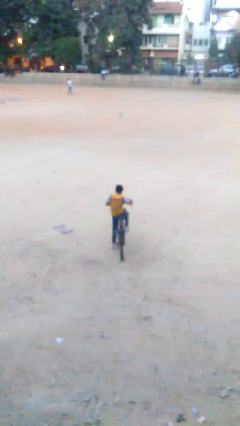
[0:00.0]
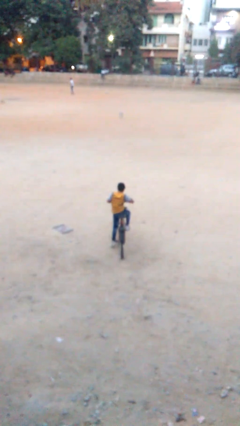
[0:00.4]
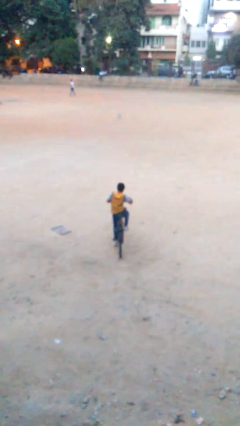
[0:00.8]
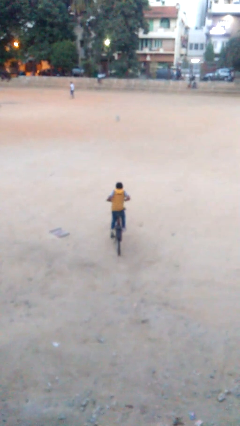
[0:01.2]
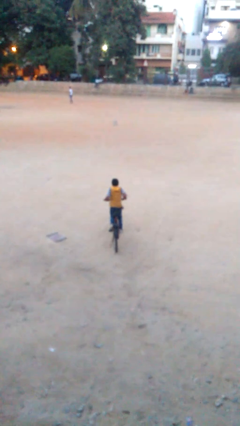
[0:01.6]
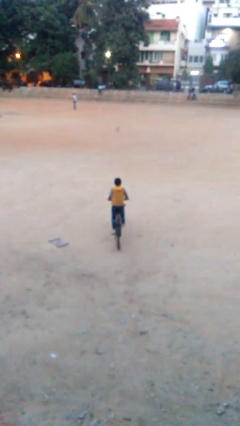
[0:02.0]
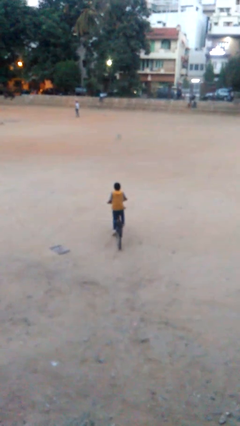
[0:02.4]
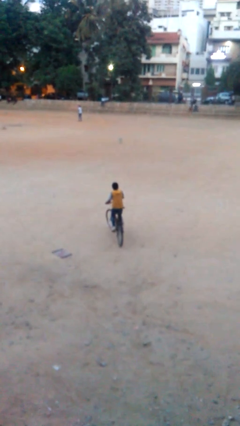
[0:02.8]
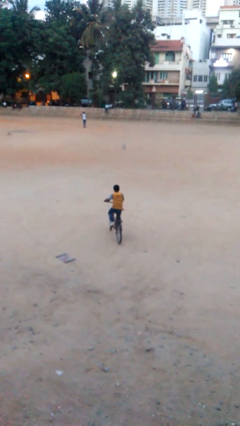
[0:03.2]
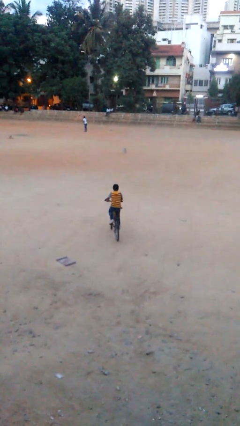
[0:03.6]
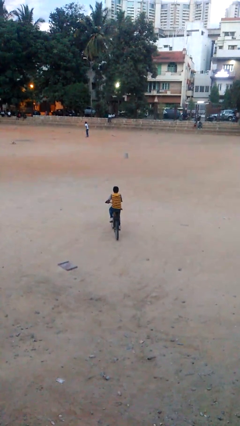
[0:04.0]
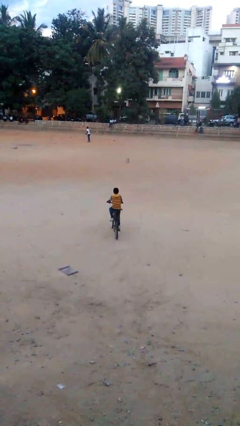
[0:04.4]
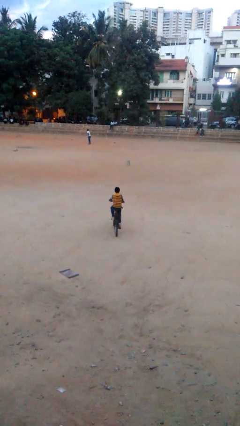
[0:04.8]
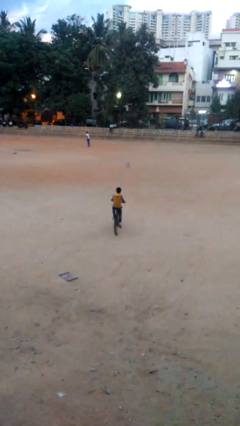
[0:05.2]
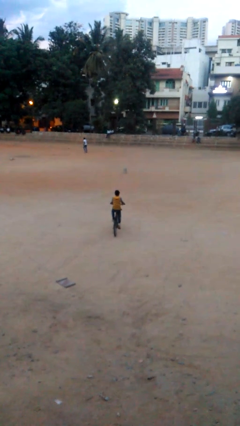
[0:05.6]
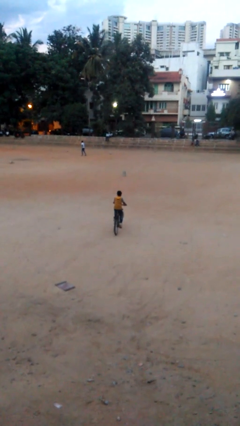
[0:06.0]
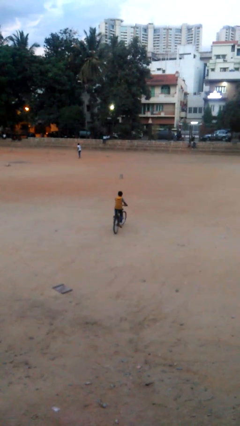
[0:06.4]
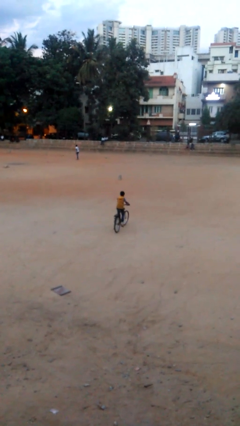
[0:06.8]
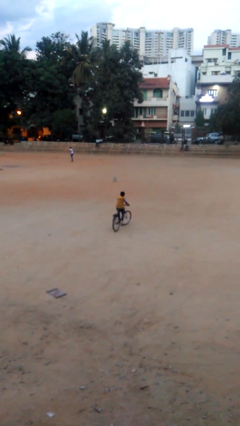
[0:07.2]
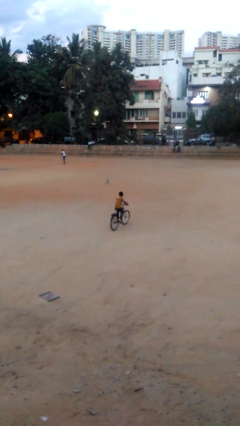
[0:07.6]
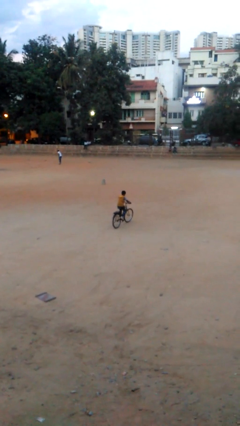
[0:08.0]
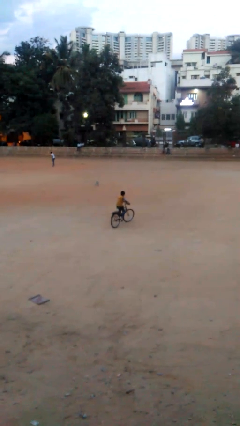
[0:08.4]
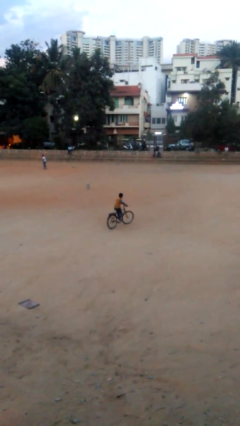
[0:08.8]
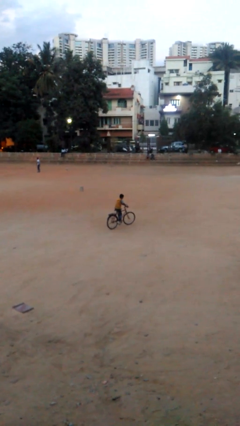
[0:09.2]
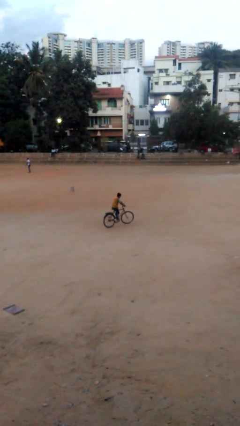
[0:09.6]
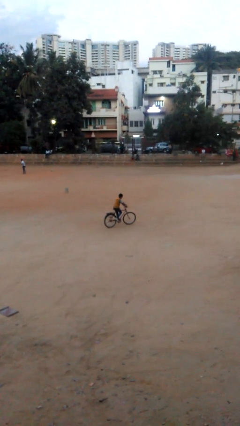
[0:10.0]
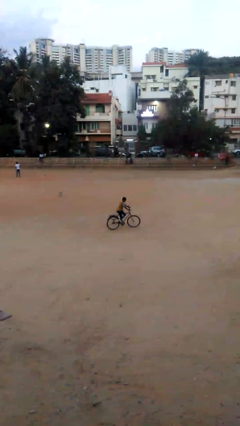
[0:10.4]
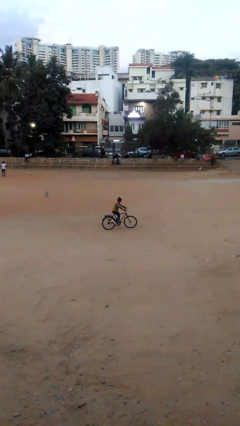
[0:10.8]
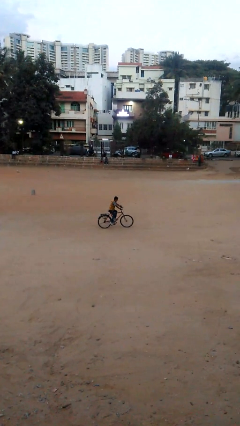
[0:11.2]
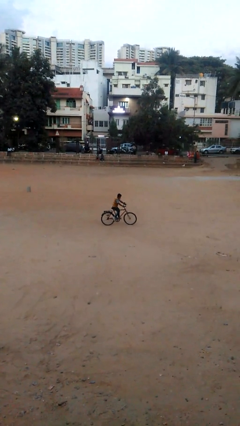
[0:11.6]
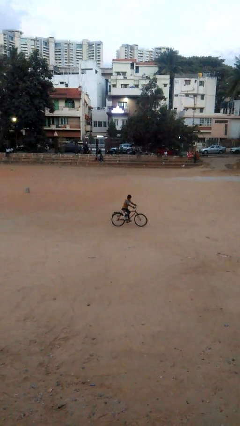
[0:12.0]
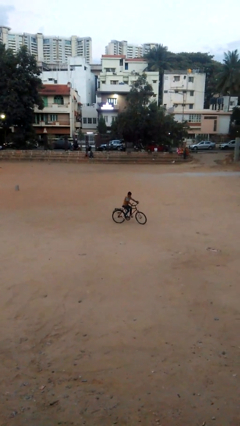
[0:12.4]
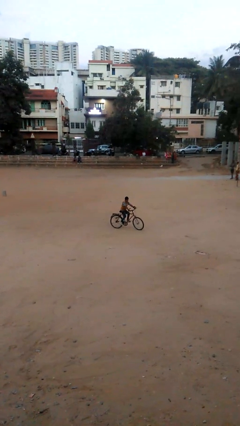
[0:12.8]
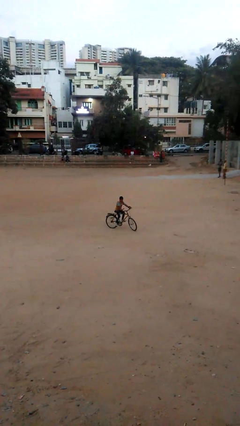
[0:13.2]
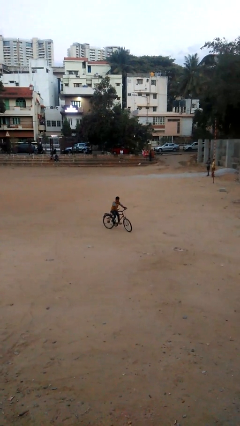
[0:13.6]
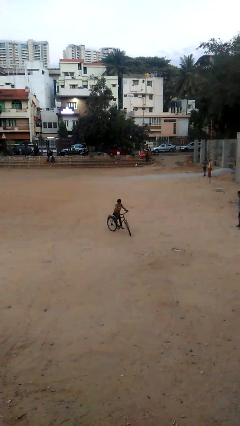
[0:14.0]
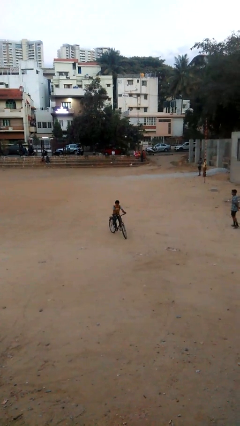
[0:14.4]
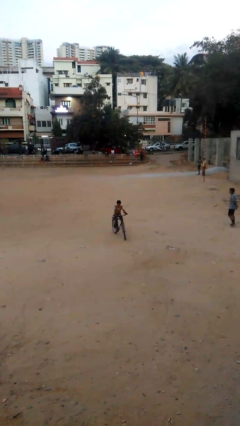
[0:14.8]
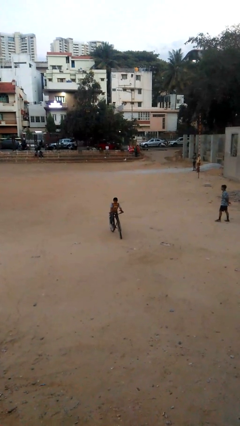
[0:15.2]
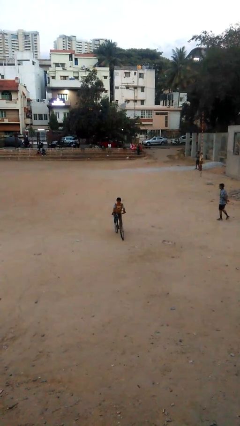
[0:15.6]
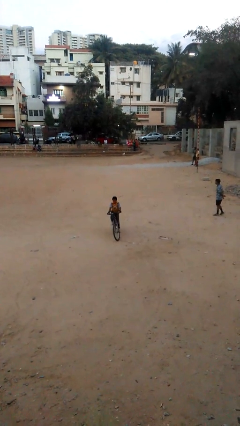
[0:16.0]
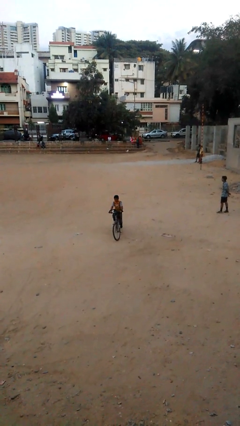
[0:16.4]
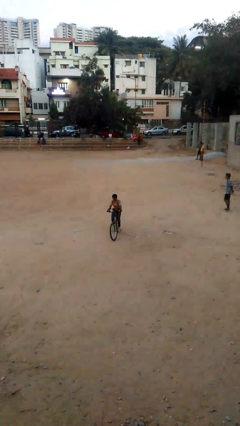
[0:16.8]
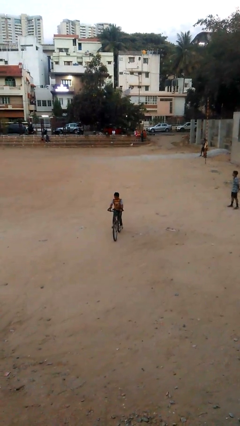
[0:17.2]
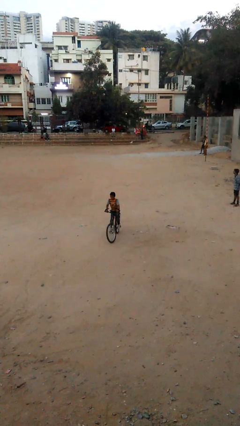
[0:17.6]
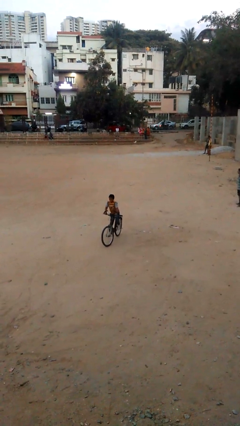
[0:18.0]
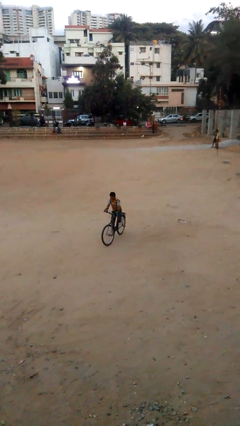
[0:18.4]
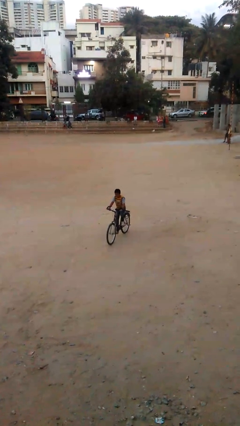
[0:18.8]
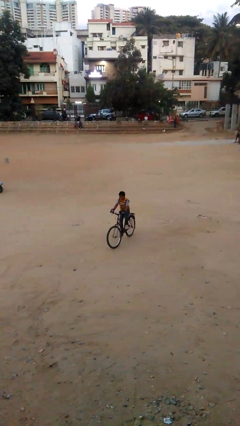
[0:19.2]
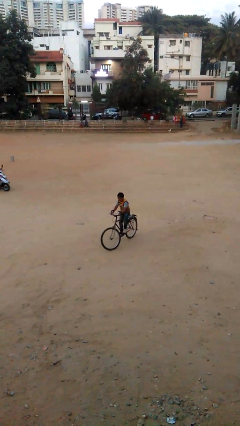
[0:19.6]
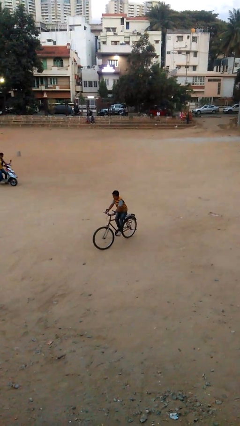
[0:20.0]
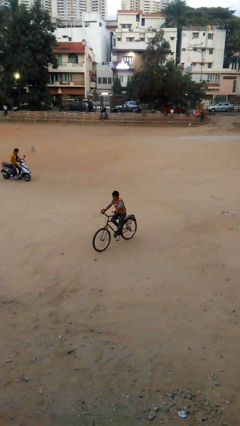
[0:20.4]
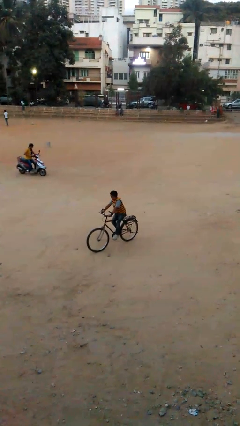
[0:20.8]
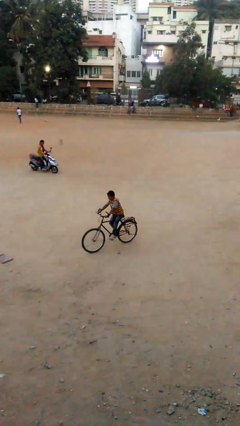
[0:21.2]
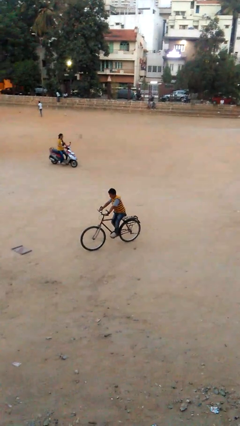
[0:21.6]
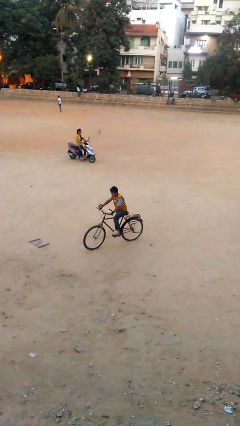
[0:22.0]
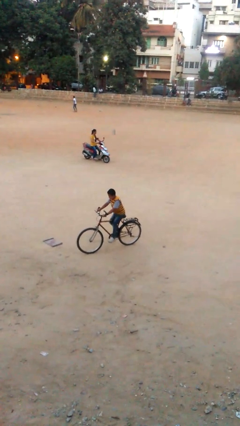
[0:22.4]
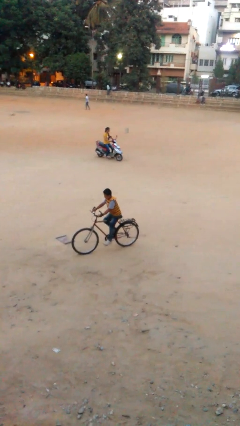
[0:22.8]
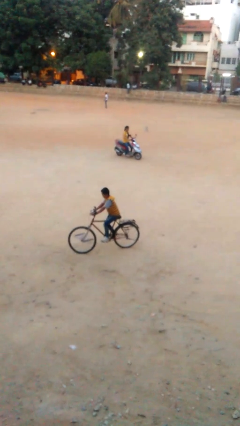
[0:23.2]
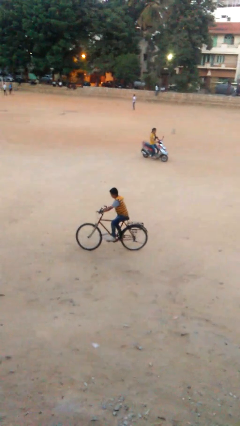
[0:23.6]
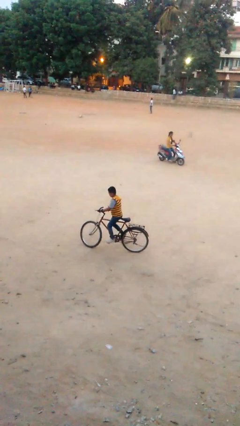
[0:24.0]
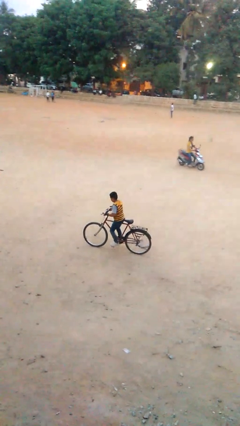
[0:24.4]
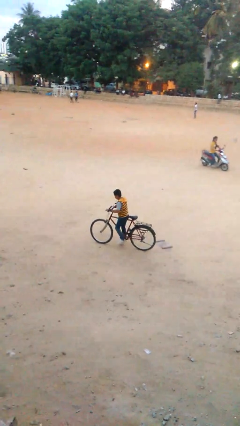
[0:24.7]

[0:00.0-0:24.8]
person rides bicycle

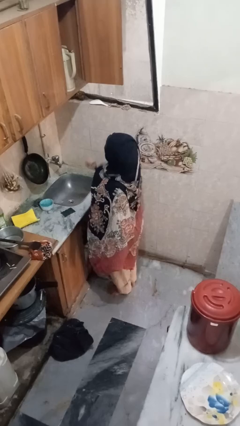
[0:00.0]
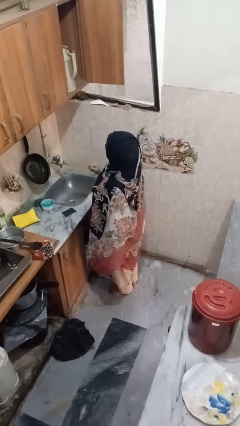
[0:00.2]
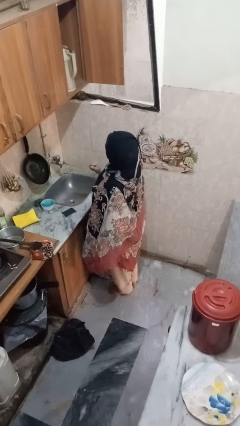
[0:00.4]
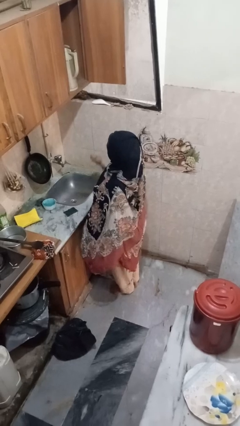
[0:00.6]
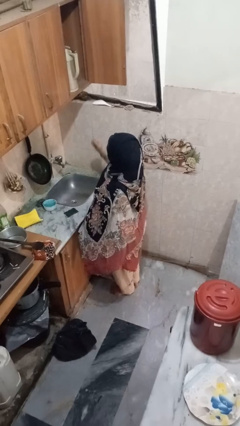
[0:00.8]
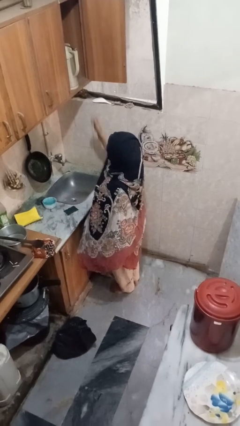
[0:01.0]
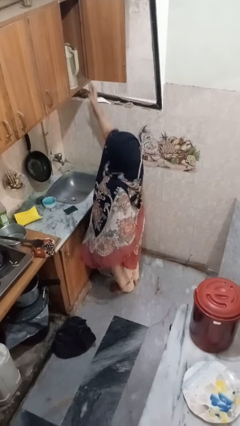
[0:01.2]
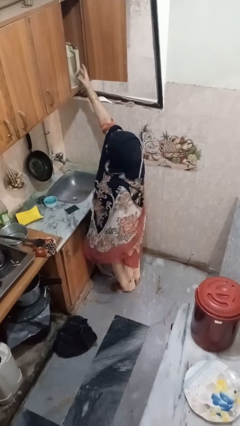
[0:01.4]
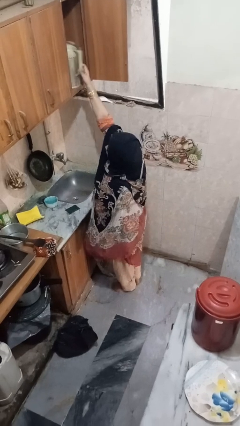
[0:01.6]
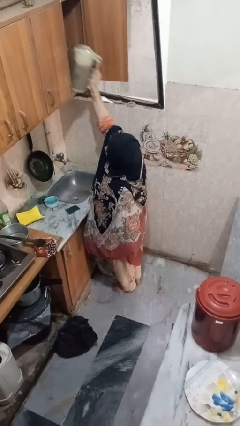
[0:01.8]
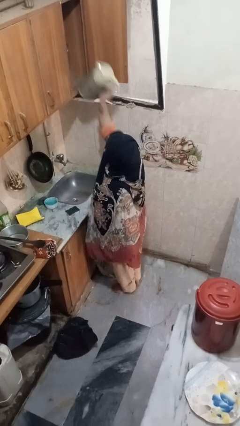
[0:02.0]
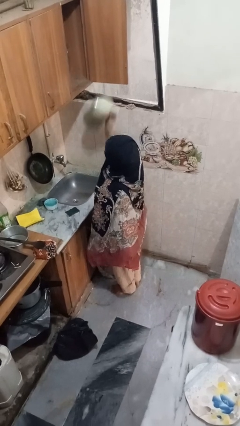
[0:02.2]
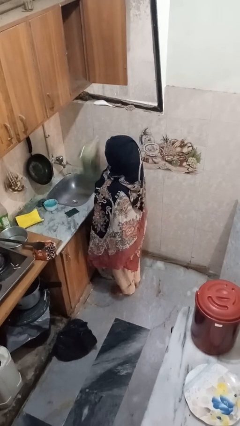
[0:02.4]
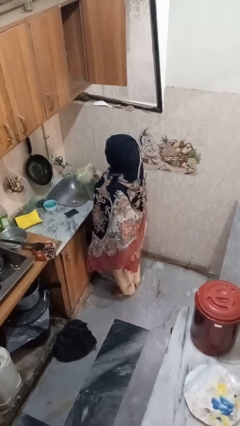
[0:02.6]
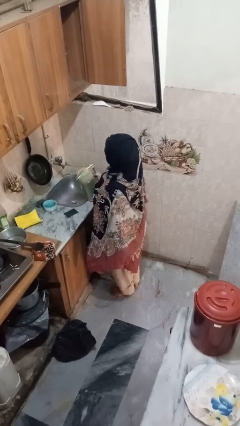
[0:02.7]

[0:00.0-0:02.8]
person puts object in cabinet

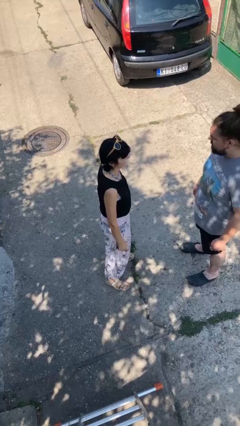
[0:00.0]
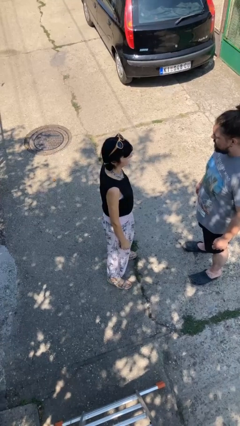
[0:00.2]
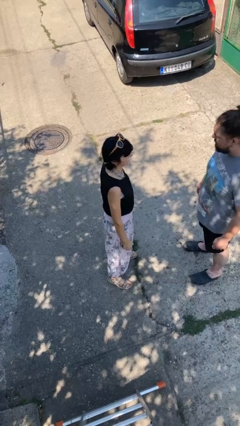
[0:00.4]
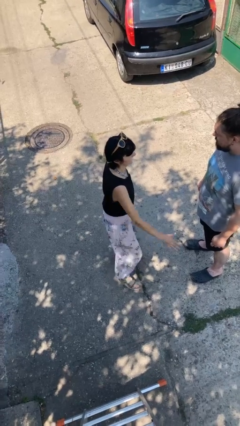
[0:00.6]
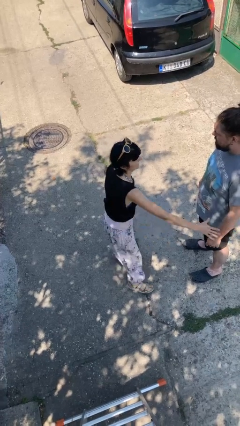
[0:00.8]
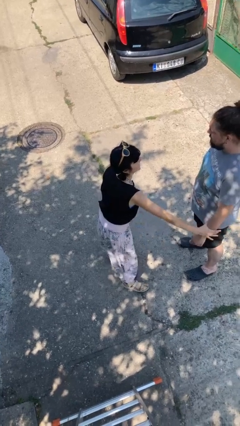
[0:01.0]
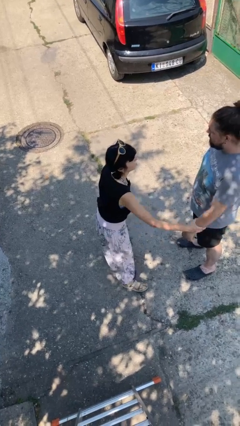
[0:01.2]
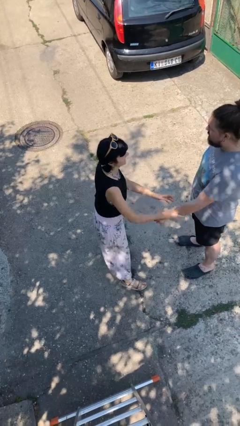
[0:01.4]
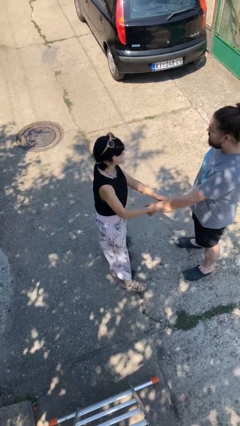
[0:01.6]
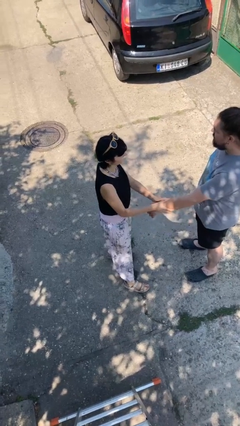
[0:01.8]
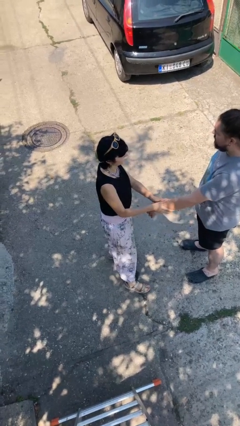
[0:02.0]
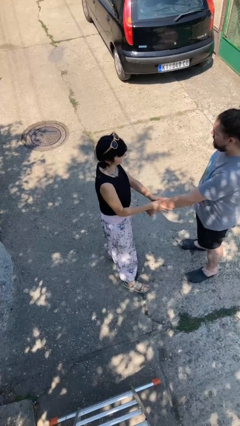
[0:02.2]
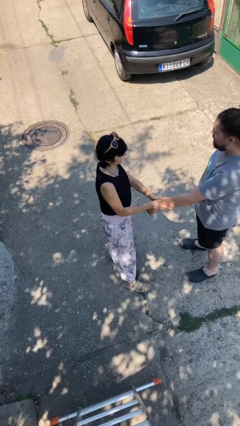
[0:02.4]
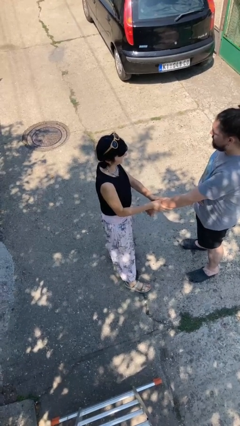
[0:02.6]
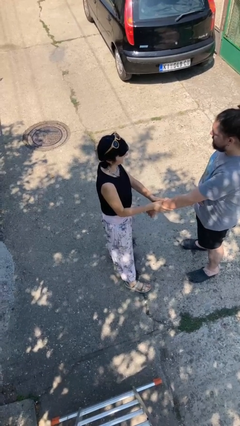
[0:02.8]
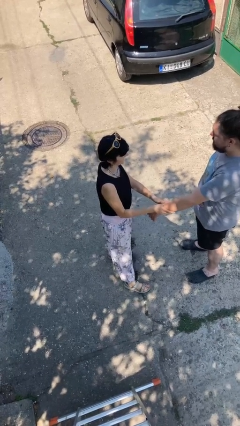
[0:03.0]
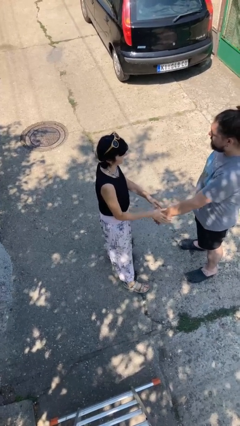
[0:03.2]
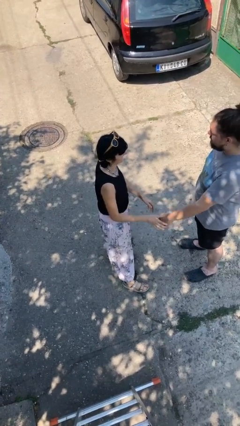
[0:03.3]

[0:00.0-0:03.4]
person grabs person by forearm
